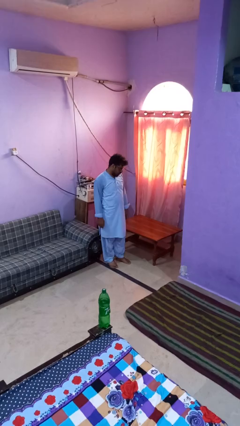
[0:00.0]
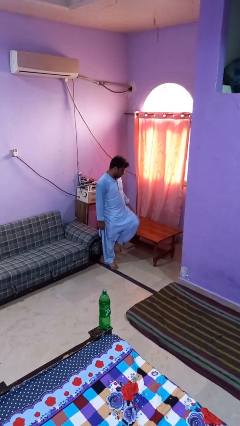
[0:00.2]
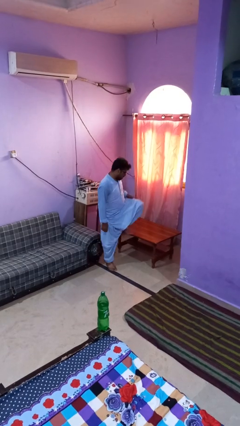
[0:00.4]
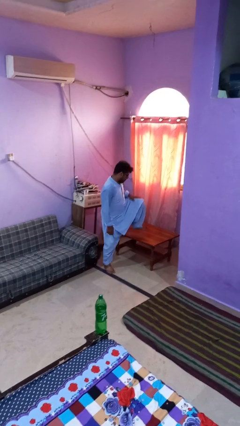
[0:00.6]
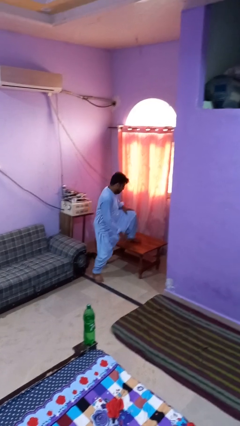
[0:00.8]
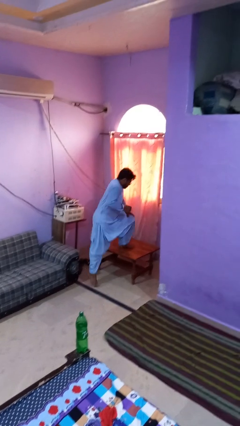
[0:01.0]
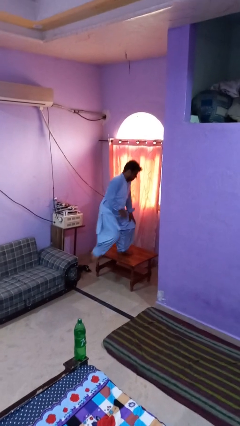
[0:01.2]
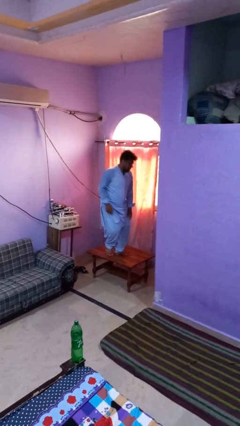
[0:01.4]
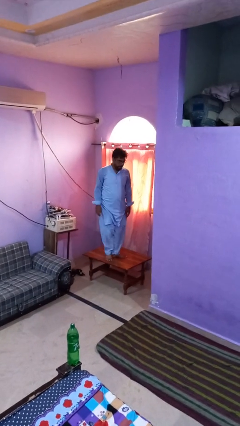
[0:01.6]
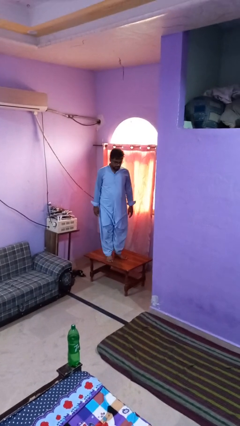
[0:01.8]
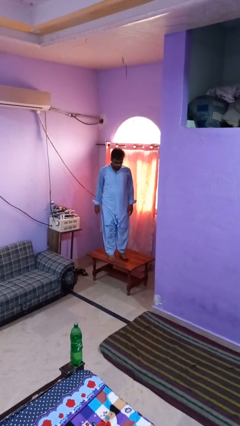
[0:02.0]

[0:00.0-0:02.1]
person climbs on table

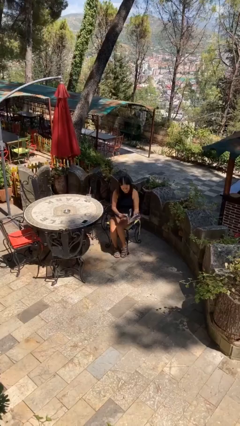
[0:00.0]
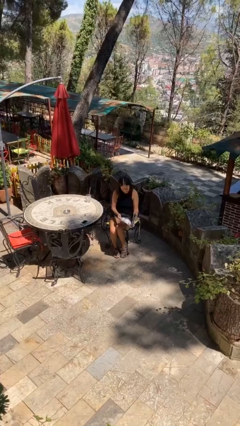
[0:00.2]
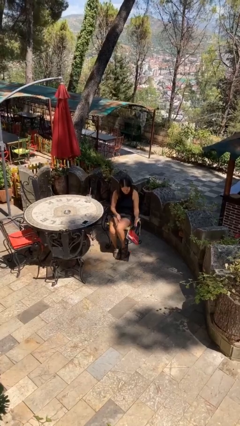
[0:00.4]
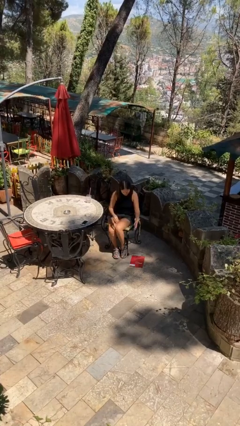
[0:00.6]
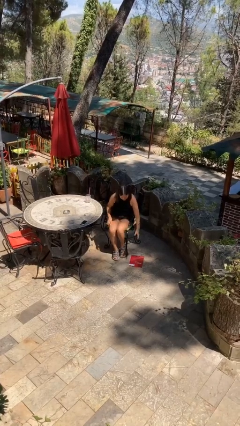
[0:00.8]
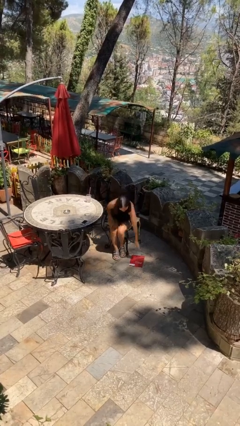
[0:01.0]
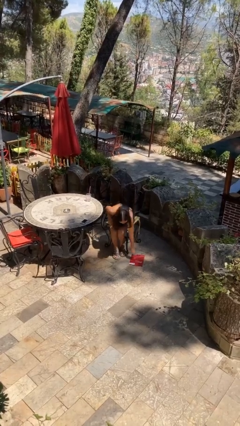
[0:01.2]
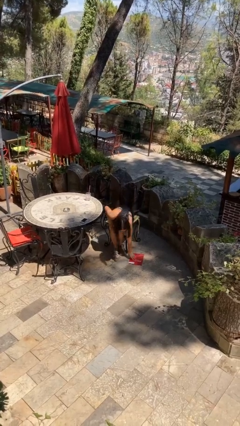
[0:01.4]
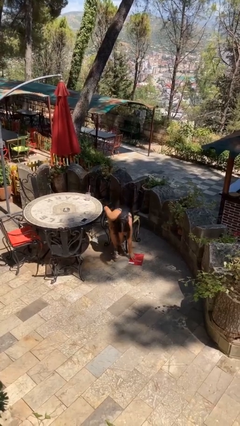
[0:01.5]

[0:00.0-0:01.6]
person drops object

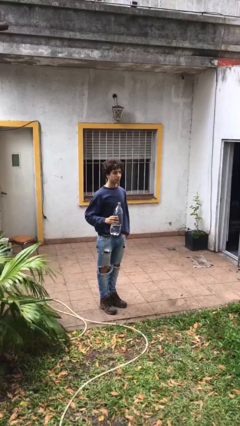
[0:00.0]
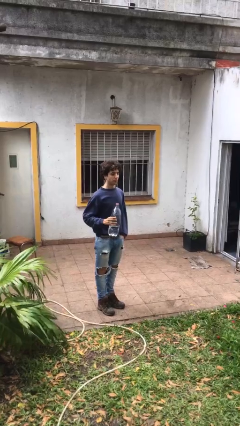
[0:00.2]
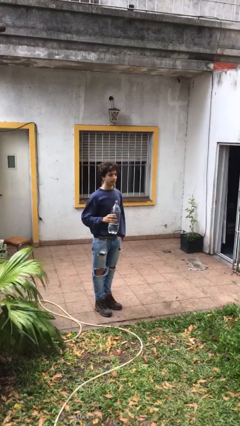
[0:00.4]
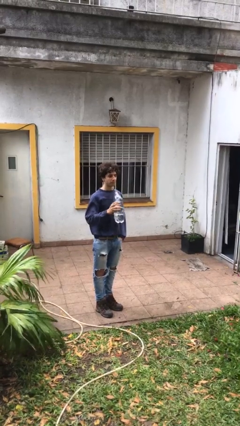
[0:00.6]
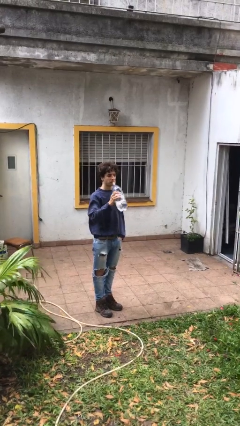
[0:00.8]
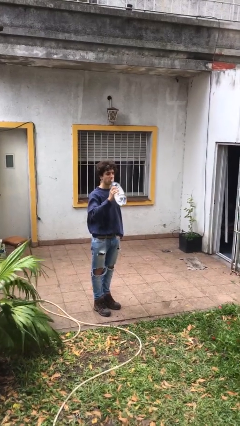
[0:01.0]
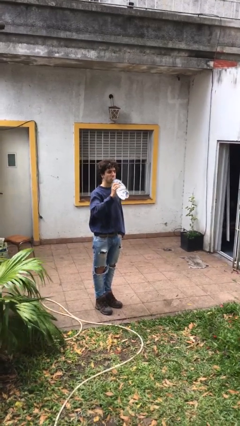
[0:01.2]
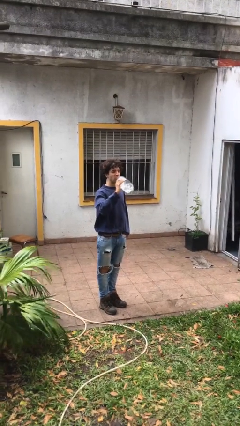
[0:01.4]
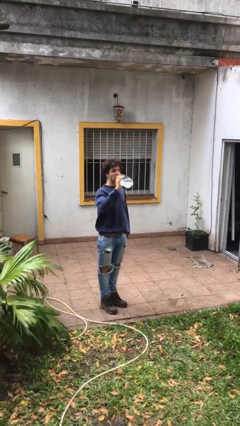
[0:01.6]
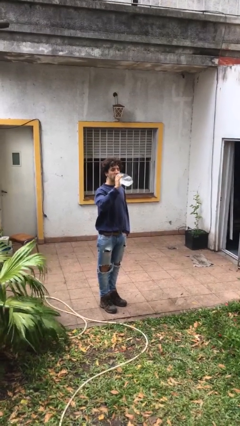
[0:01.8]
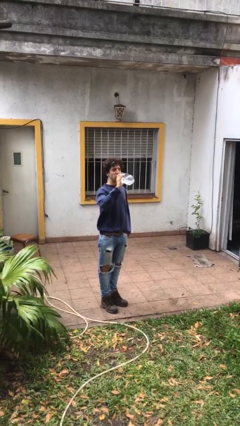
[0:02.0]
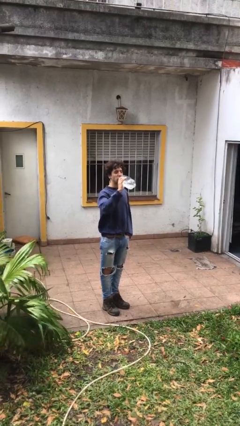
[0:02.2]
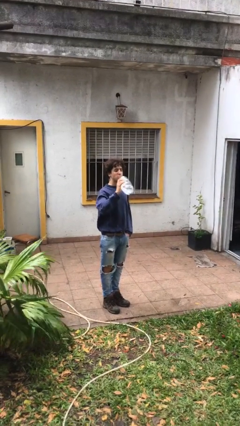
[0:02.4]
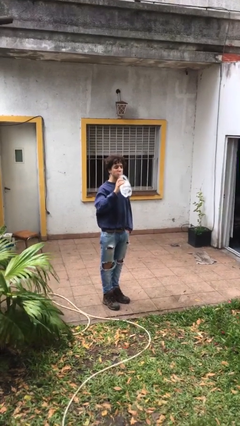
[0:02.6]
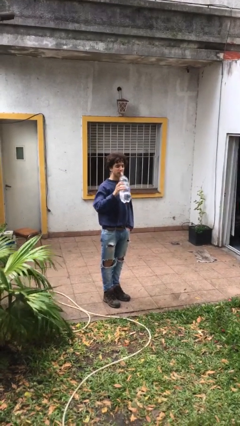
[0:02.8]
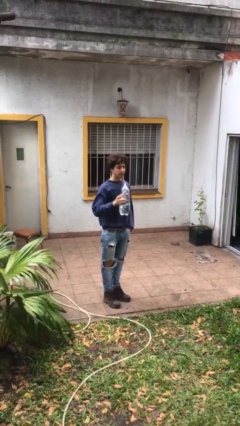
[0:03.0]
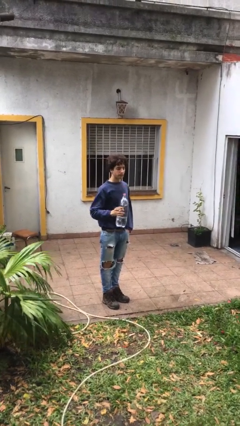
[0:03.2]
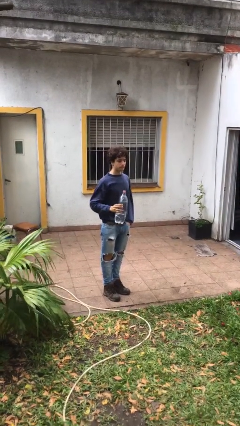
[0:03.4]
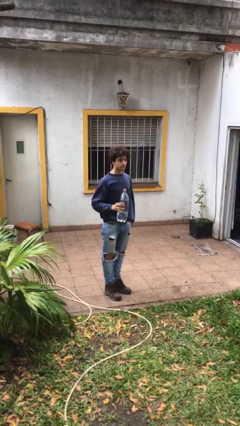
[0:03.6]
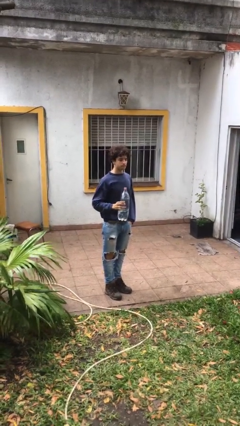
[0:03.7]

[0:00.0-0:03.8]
person drinks from bottle

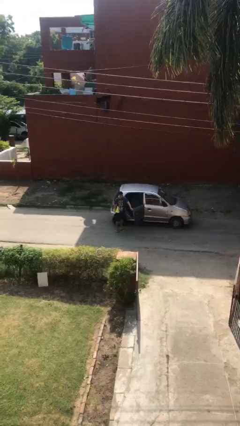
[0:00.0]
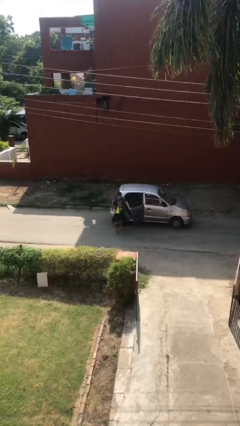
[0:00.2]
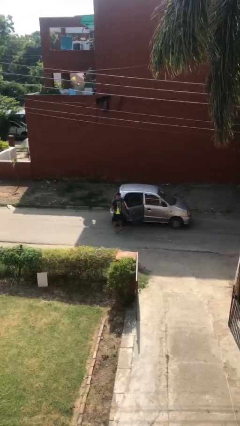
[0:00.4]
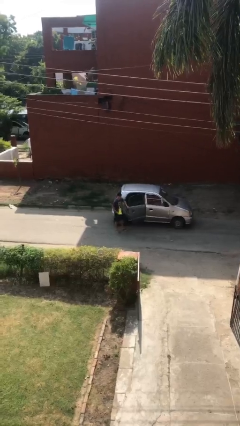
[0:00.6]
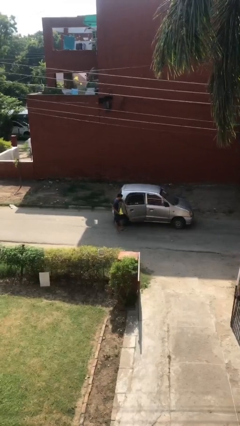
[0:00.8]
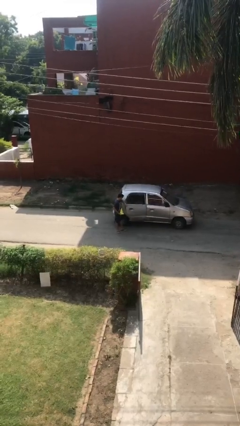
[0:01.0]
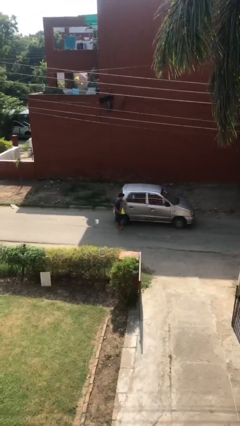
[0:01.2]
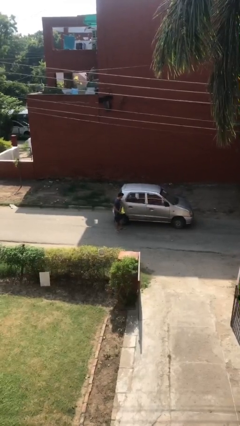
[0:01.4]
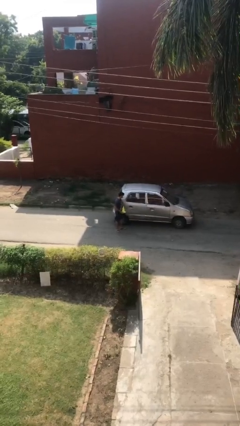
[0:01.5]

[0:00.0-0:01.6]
person closes car door

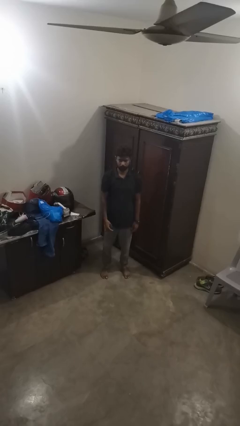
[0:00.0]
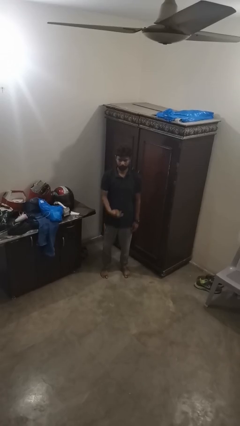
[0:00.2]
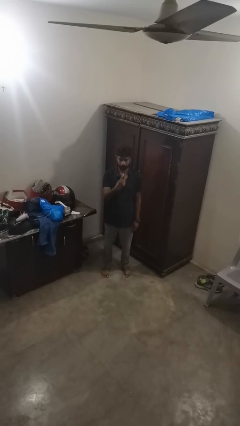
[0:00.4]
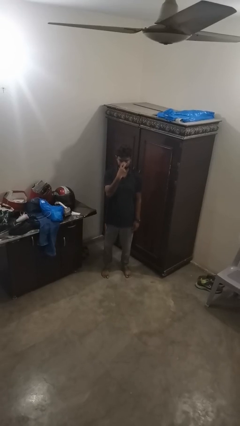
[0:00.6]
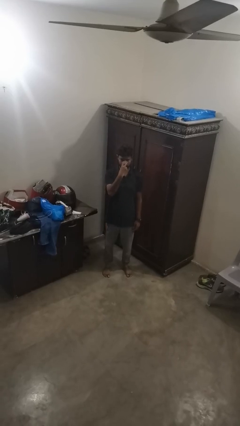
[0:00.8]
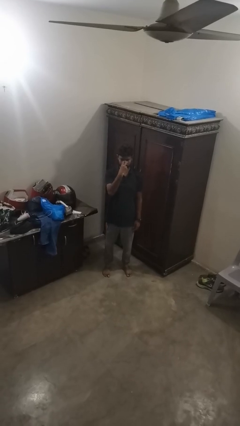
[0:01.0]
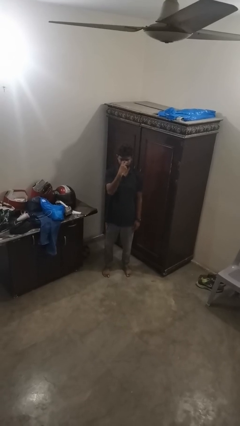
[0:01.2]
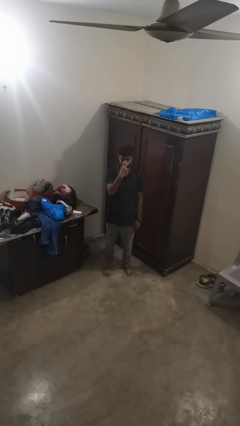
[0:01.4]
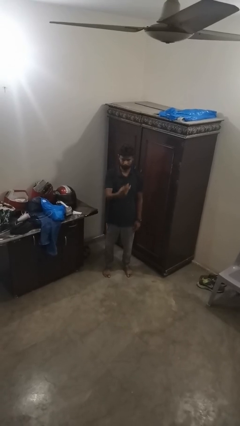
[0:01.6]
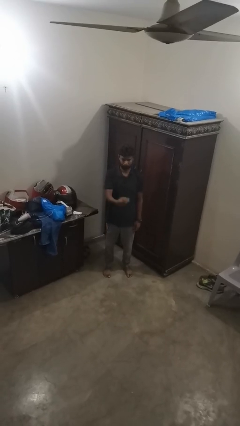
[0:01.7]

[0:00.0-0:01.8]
person gestures watch closely

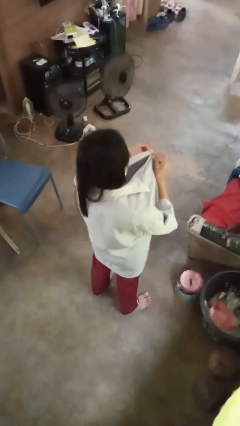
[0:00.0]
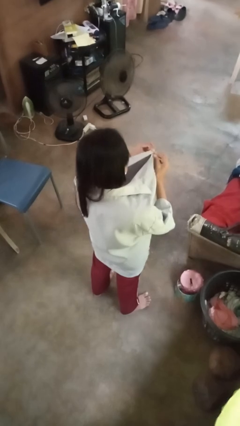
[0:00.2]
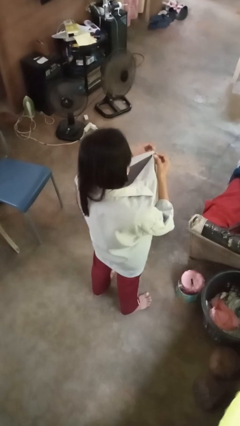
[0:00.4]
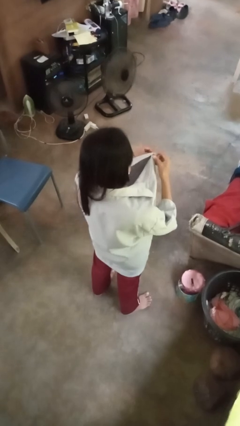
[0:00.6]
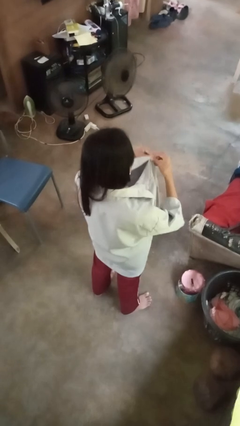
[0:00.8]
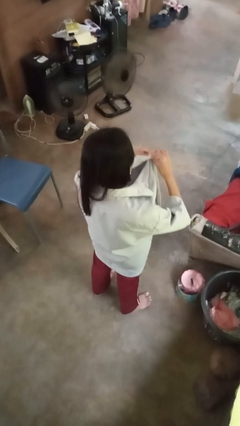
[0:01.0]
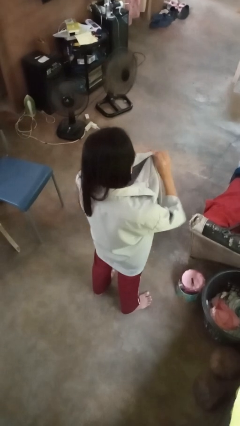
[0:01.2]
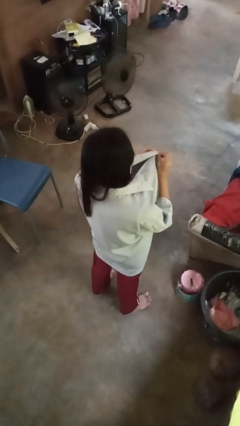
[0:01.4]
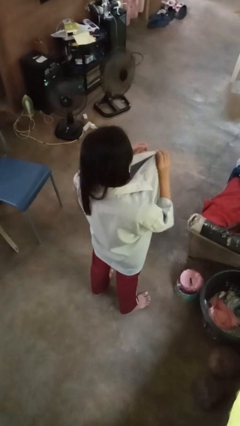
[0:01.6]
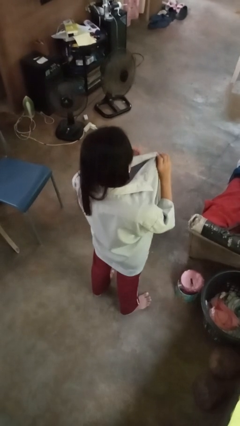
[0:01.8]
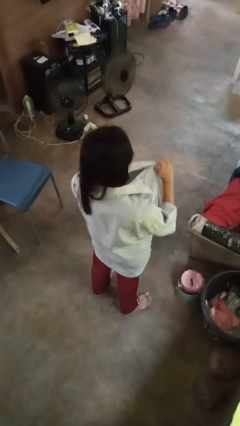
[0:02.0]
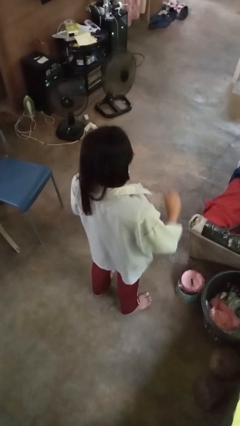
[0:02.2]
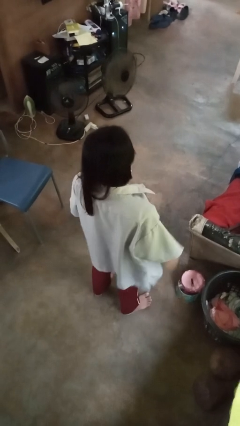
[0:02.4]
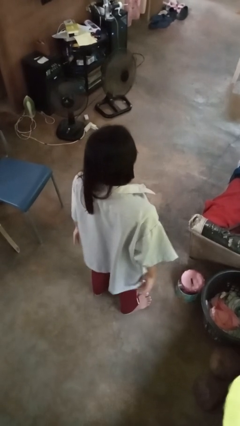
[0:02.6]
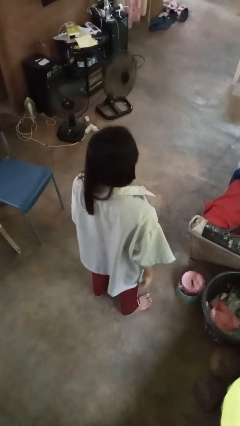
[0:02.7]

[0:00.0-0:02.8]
person buttons shirt

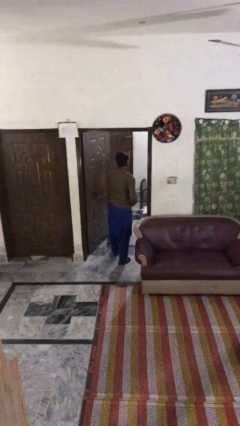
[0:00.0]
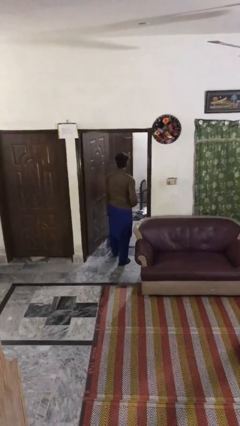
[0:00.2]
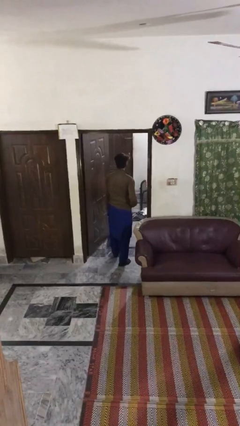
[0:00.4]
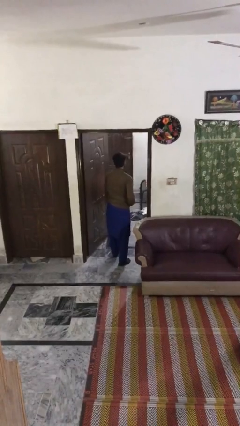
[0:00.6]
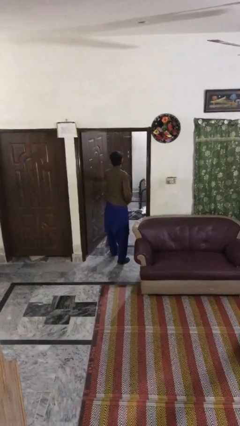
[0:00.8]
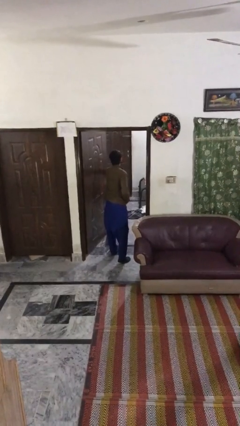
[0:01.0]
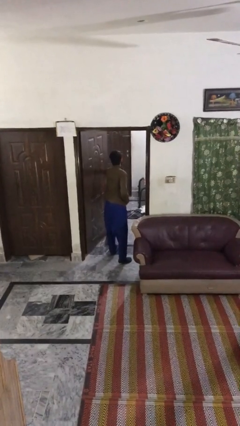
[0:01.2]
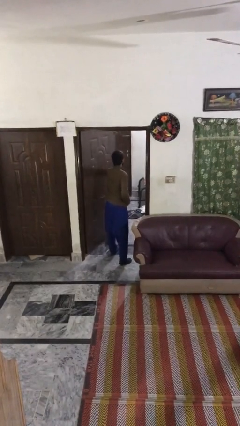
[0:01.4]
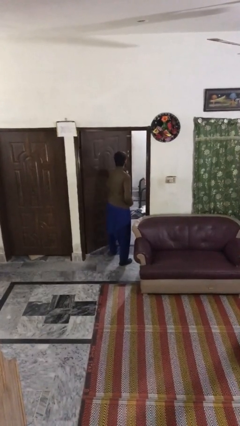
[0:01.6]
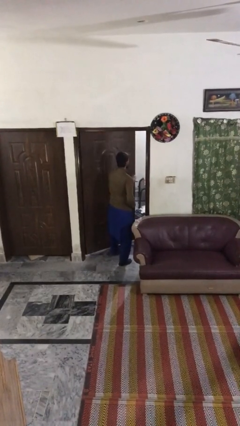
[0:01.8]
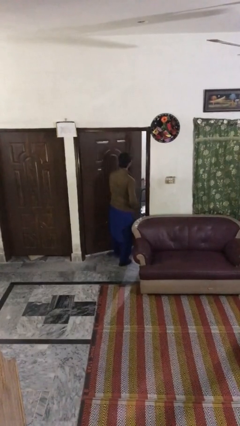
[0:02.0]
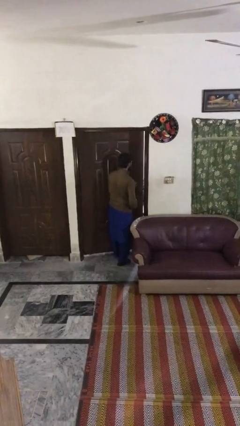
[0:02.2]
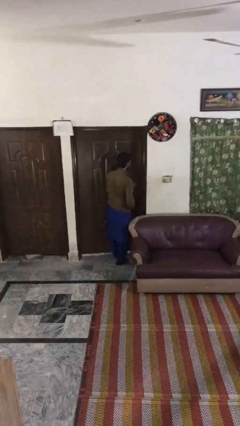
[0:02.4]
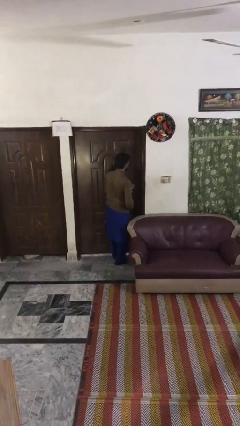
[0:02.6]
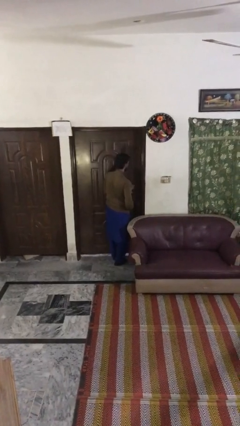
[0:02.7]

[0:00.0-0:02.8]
person closes facility door

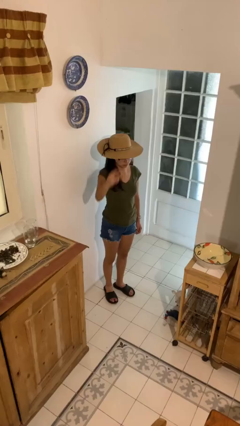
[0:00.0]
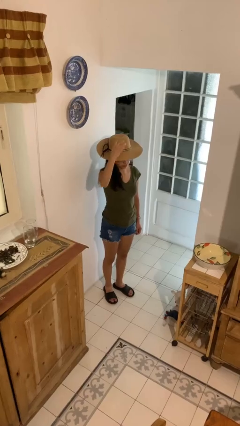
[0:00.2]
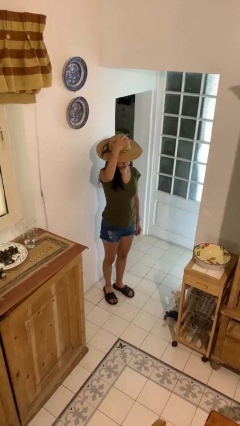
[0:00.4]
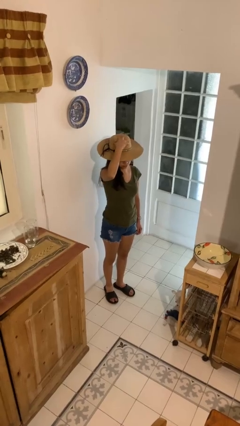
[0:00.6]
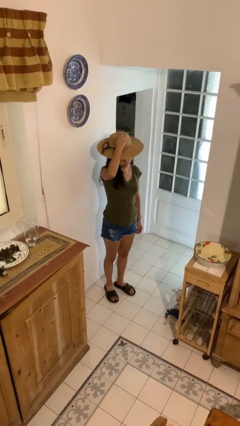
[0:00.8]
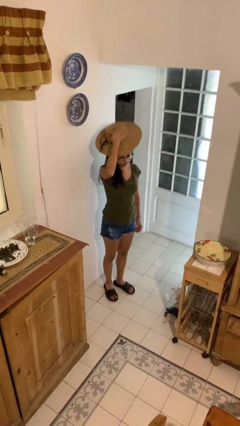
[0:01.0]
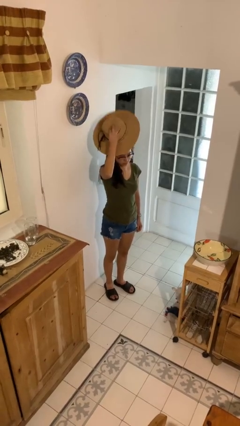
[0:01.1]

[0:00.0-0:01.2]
person takes off hat
